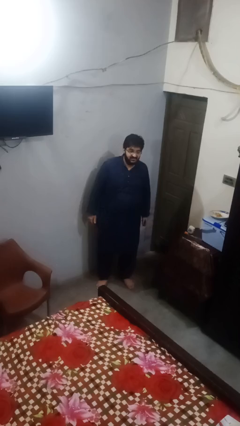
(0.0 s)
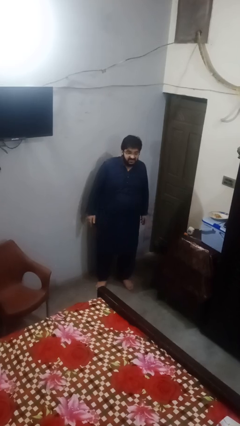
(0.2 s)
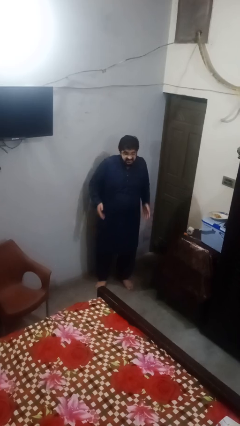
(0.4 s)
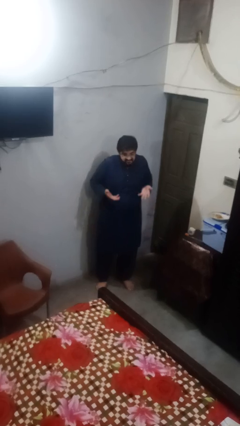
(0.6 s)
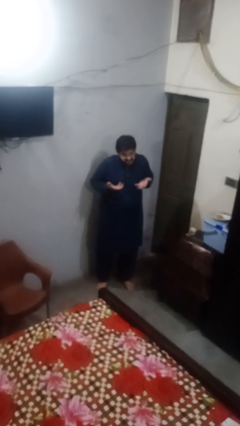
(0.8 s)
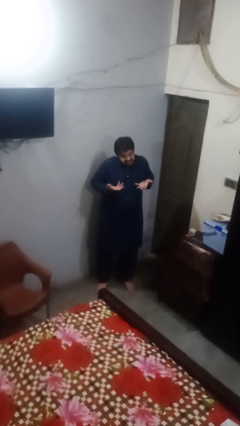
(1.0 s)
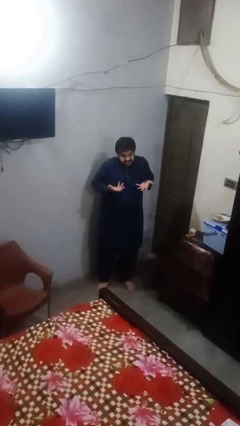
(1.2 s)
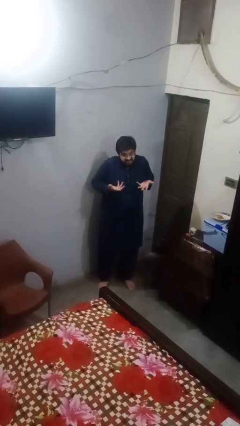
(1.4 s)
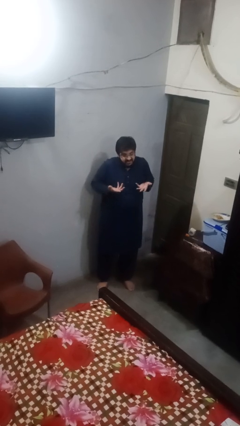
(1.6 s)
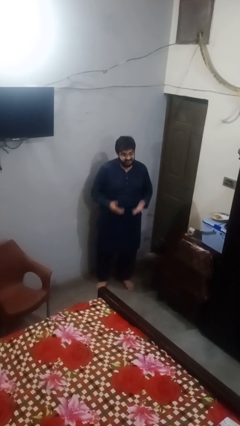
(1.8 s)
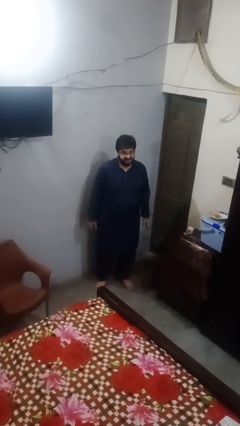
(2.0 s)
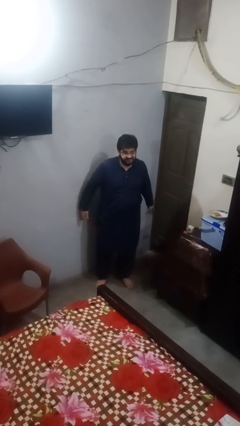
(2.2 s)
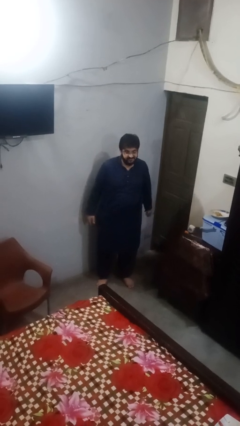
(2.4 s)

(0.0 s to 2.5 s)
person shrugs

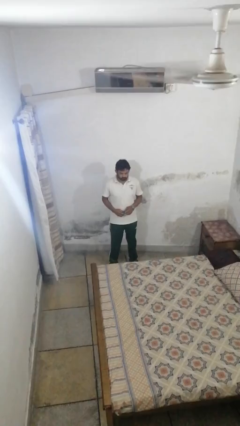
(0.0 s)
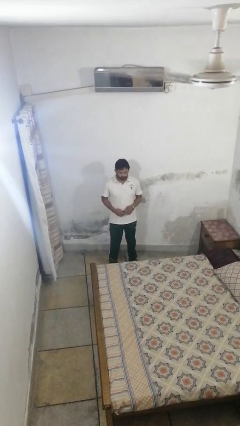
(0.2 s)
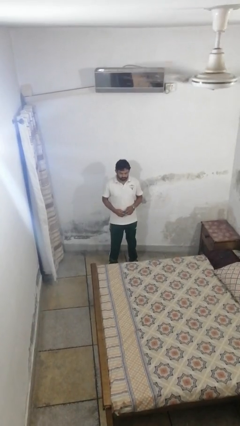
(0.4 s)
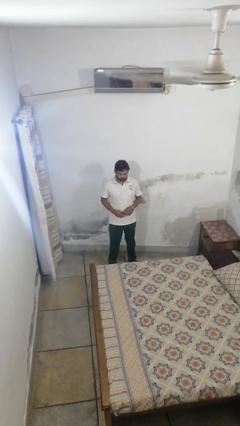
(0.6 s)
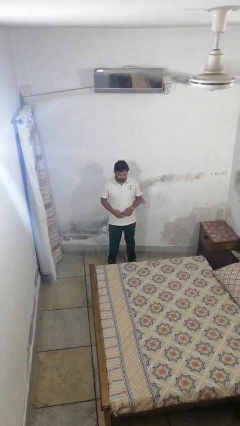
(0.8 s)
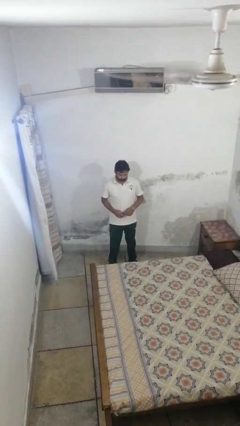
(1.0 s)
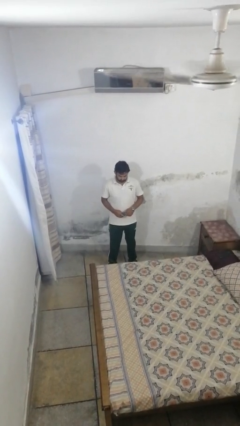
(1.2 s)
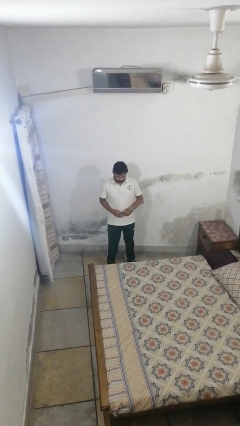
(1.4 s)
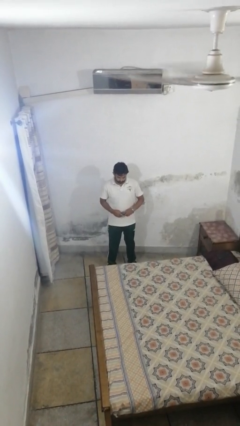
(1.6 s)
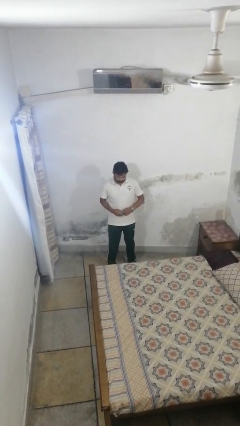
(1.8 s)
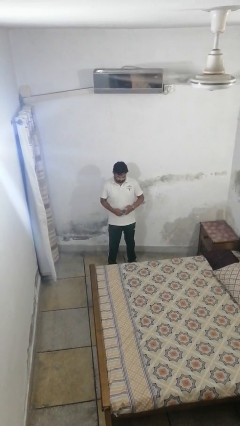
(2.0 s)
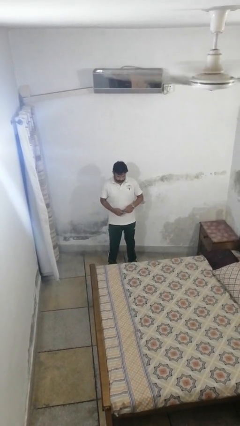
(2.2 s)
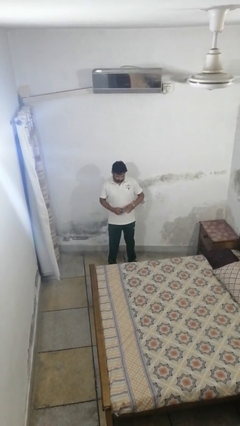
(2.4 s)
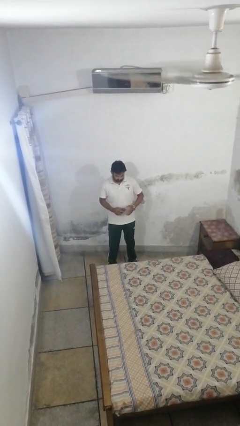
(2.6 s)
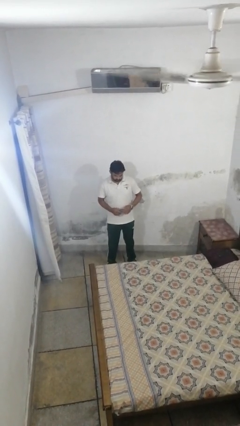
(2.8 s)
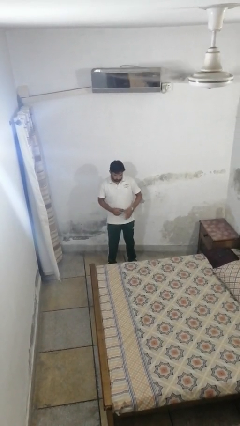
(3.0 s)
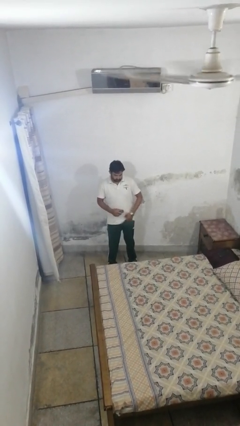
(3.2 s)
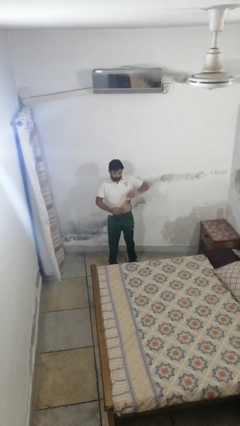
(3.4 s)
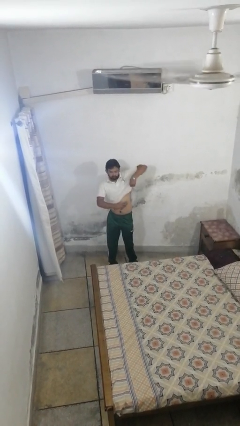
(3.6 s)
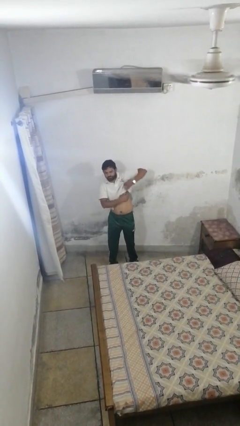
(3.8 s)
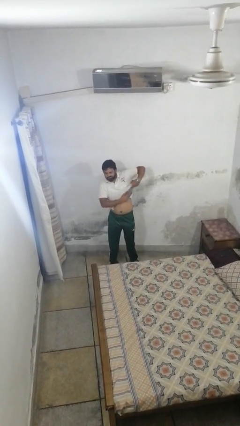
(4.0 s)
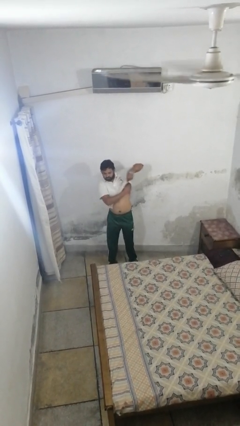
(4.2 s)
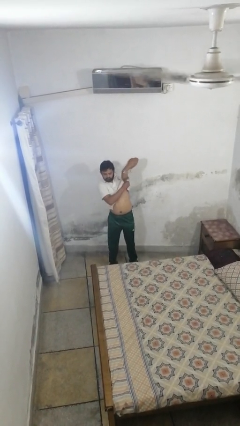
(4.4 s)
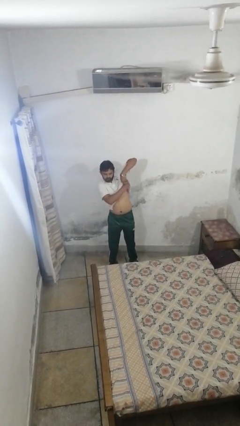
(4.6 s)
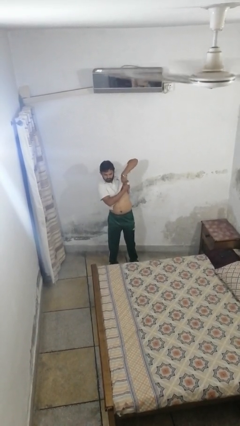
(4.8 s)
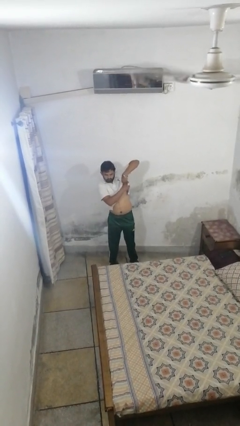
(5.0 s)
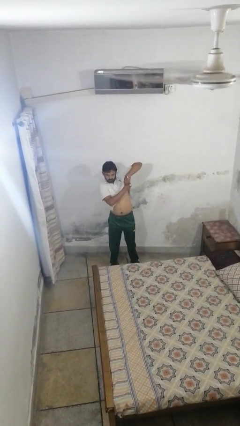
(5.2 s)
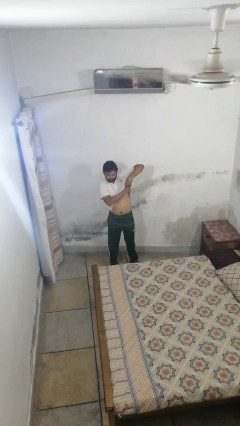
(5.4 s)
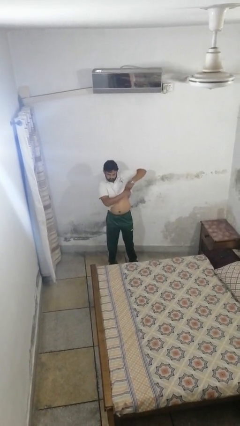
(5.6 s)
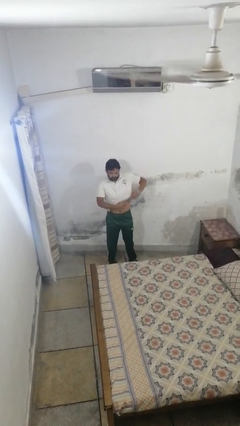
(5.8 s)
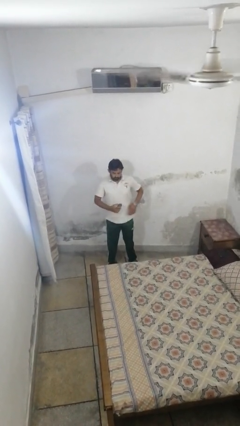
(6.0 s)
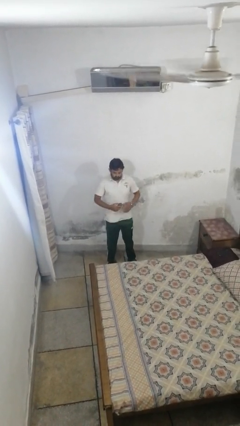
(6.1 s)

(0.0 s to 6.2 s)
person applies deodorant

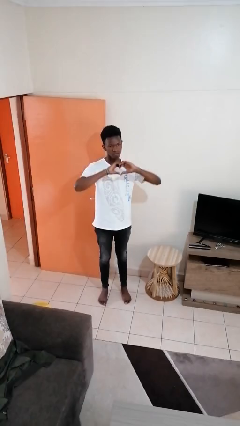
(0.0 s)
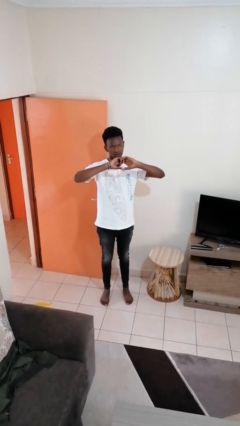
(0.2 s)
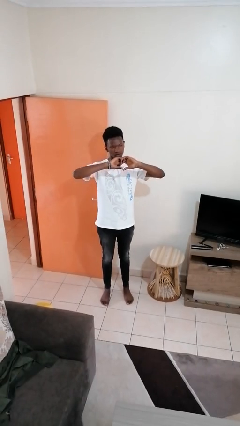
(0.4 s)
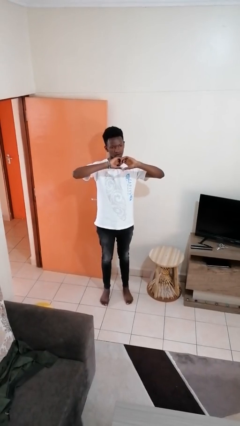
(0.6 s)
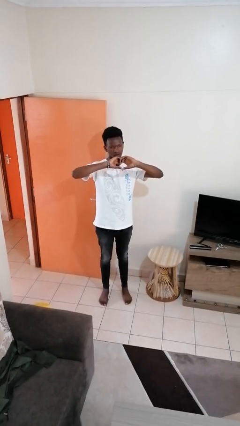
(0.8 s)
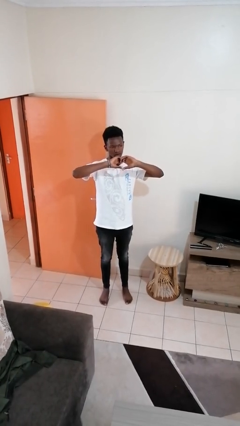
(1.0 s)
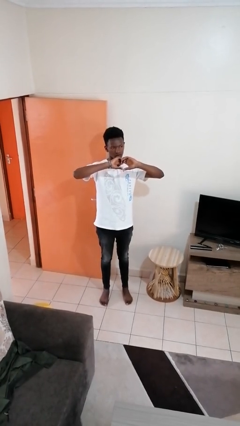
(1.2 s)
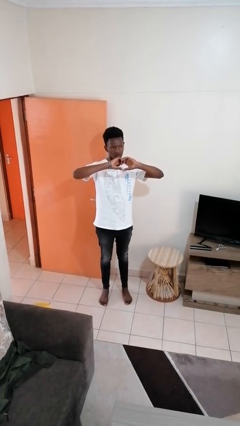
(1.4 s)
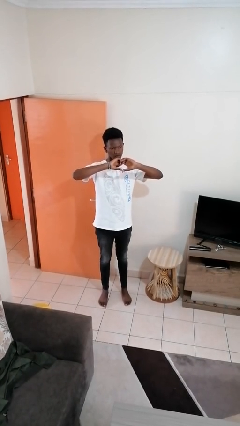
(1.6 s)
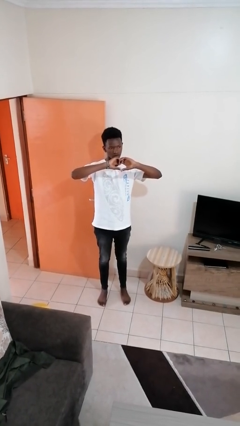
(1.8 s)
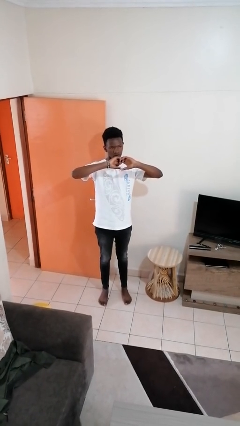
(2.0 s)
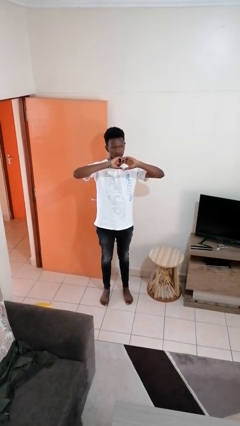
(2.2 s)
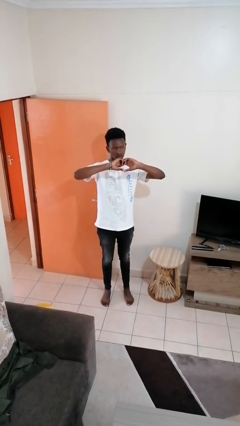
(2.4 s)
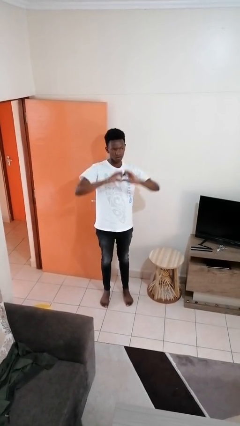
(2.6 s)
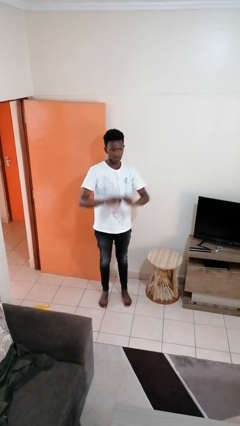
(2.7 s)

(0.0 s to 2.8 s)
person gestures heart

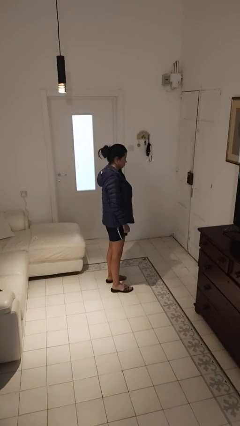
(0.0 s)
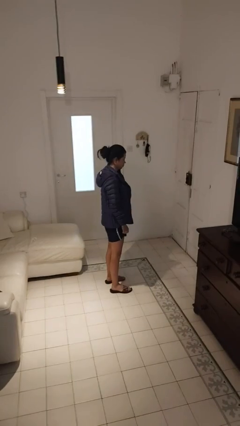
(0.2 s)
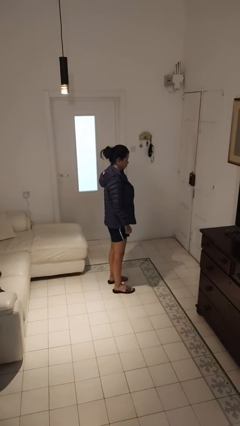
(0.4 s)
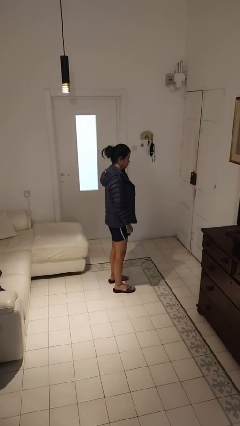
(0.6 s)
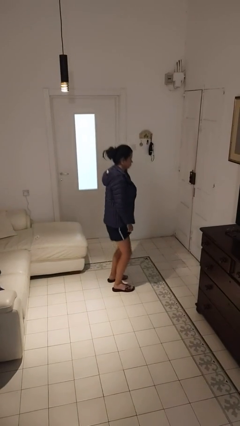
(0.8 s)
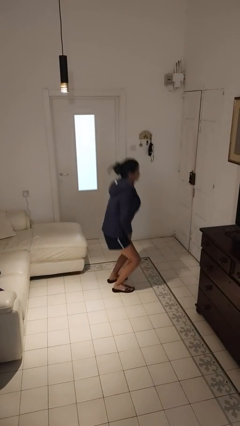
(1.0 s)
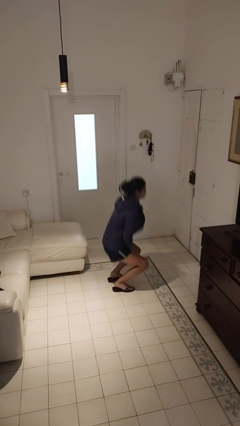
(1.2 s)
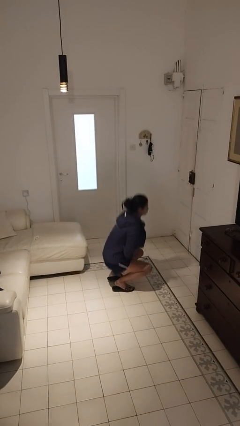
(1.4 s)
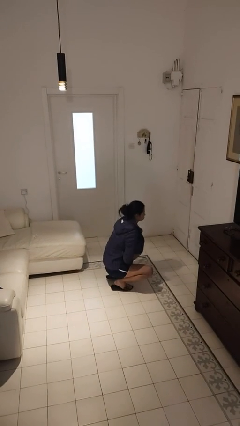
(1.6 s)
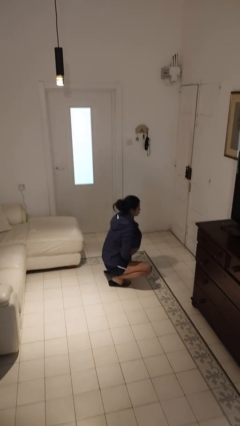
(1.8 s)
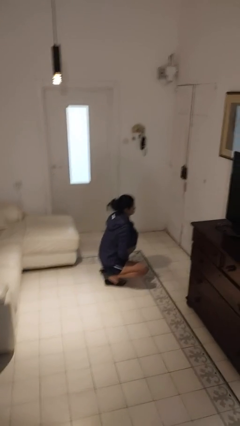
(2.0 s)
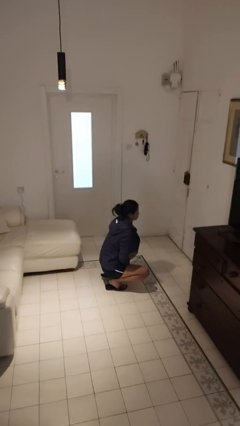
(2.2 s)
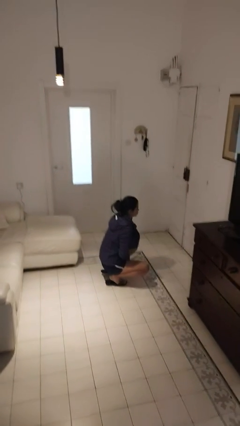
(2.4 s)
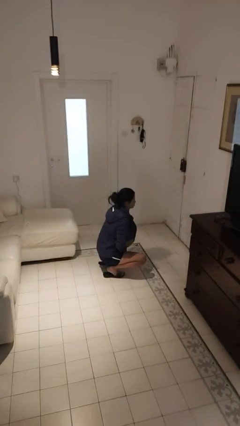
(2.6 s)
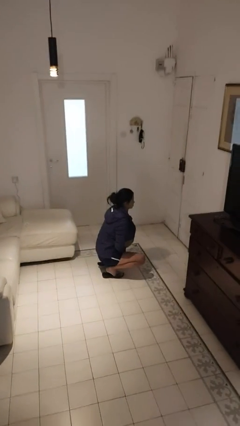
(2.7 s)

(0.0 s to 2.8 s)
person squats

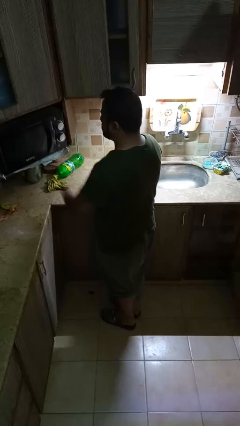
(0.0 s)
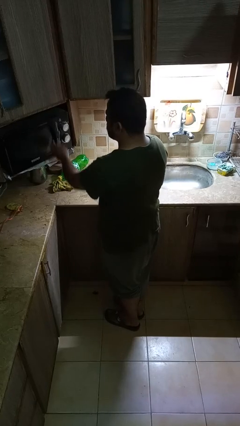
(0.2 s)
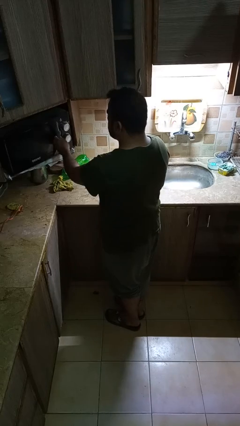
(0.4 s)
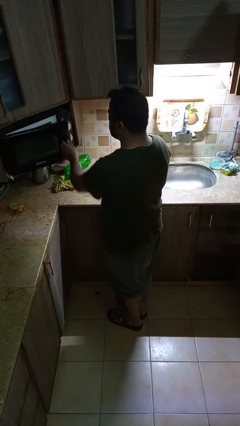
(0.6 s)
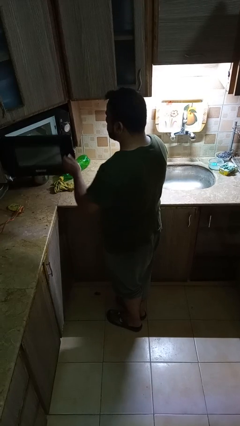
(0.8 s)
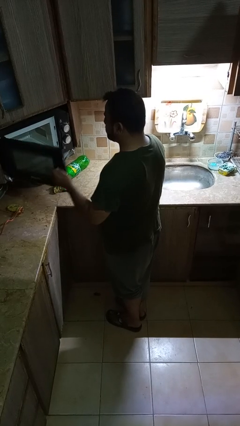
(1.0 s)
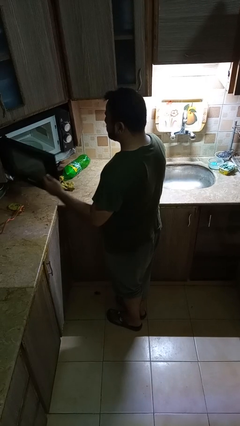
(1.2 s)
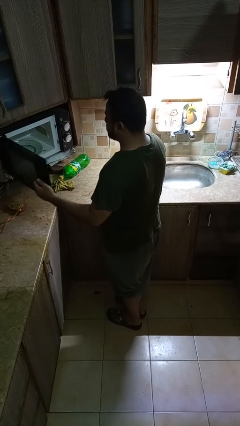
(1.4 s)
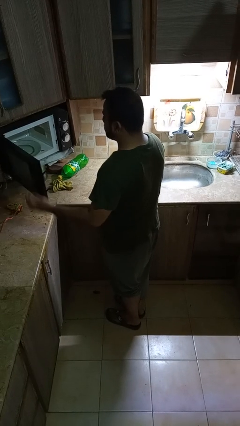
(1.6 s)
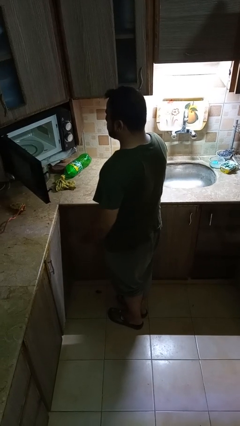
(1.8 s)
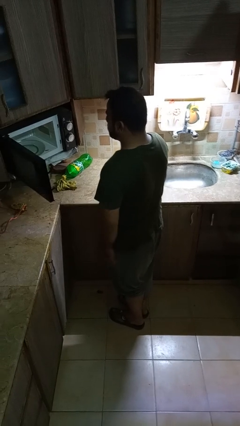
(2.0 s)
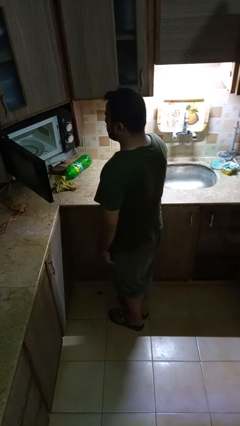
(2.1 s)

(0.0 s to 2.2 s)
person opens oven door

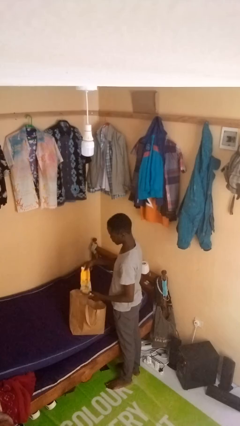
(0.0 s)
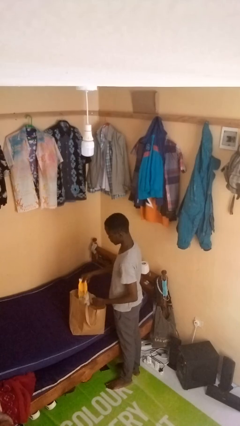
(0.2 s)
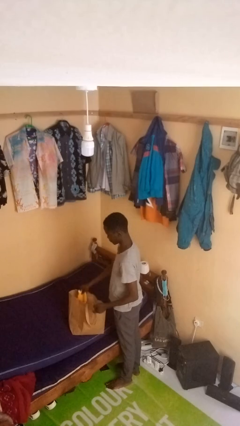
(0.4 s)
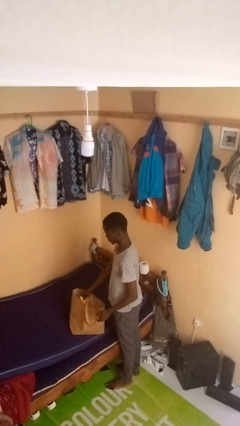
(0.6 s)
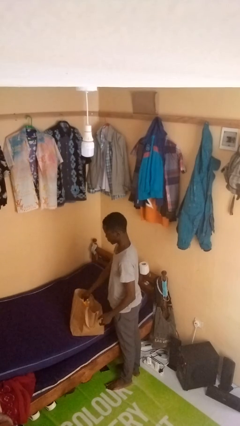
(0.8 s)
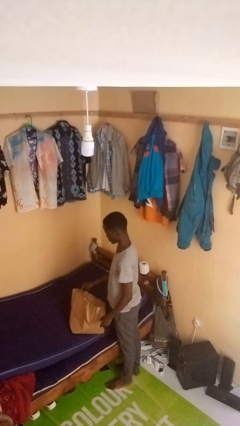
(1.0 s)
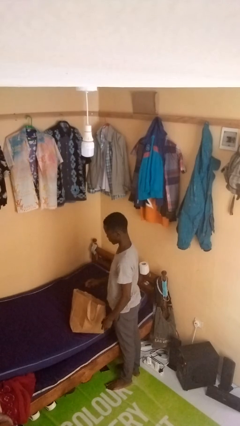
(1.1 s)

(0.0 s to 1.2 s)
person puts object into bag
